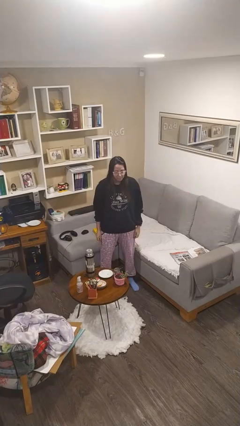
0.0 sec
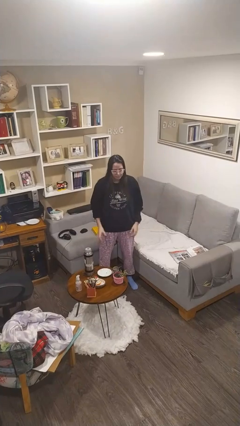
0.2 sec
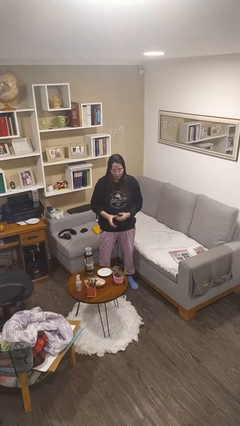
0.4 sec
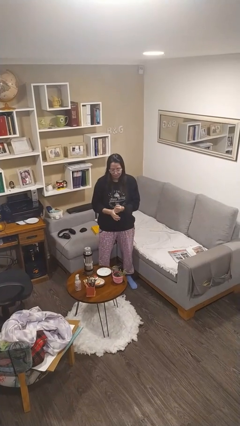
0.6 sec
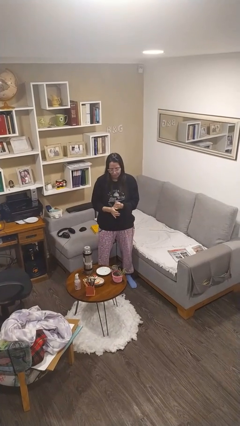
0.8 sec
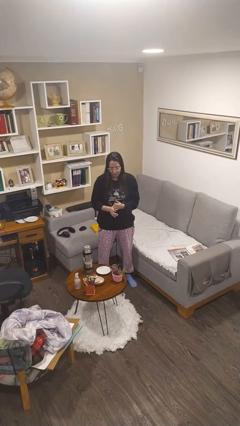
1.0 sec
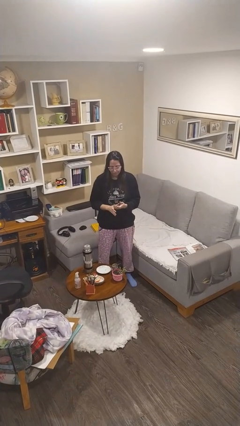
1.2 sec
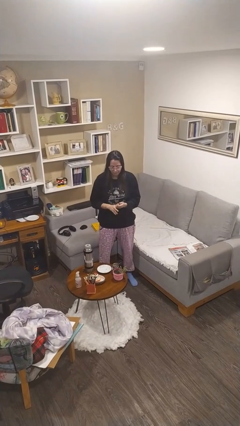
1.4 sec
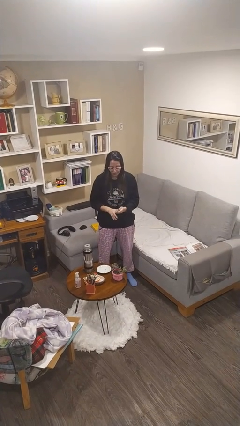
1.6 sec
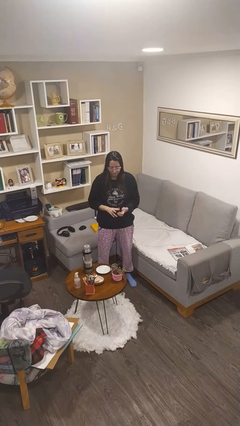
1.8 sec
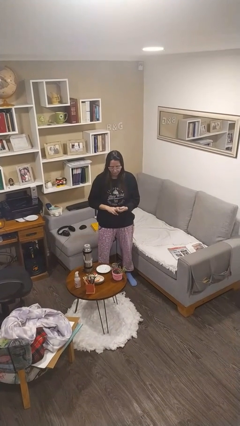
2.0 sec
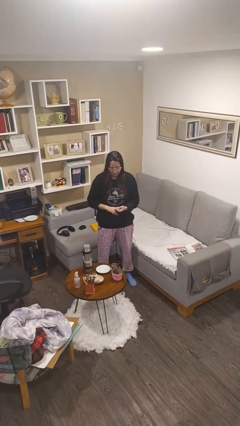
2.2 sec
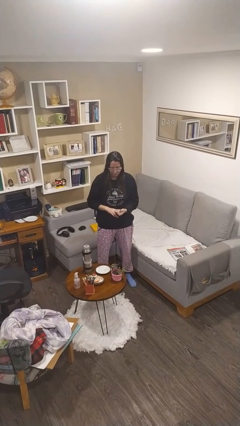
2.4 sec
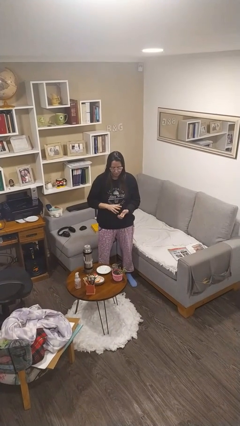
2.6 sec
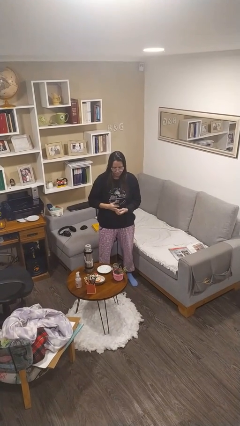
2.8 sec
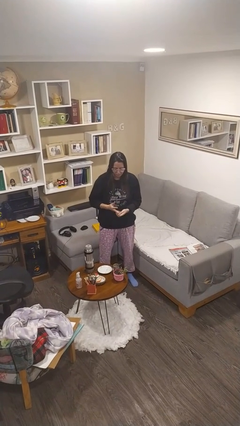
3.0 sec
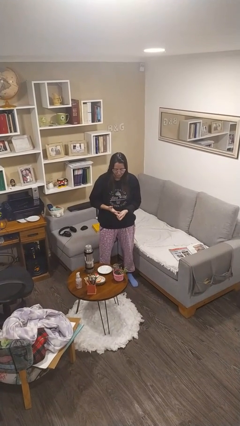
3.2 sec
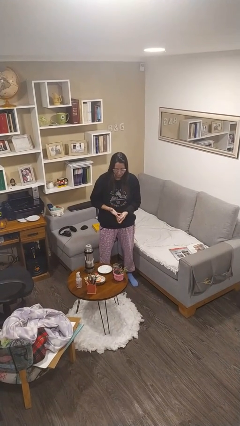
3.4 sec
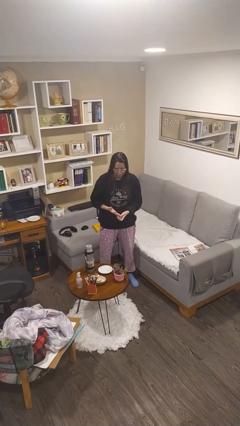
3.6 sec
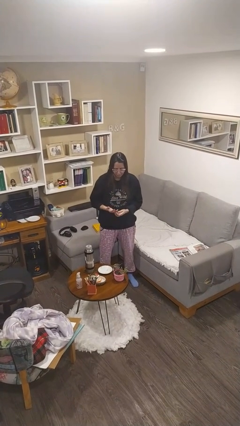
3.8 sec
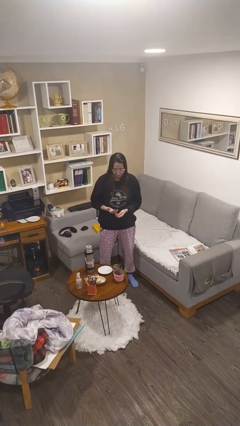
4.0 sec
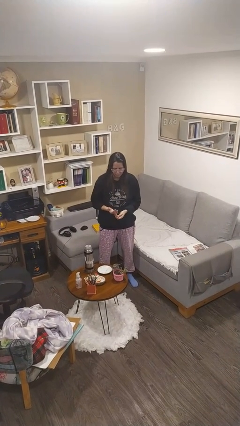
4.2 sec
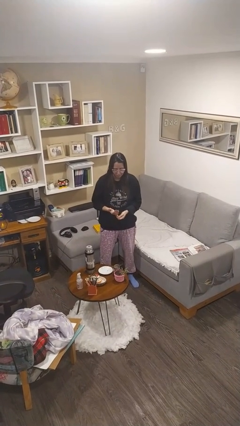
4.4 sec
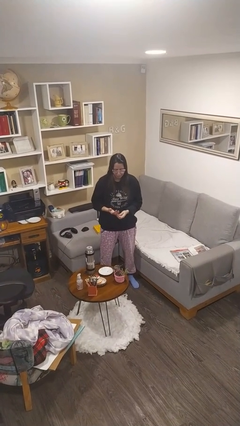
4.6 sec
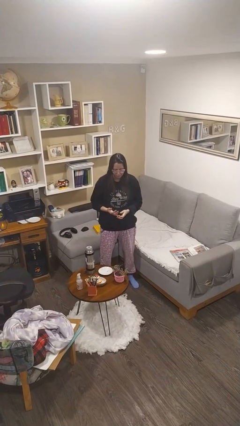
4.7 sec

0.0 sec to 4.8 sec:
person cracks knuckles

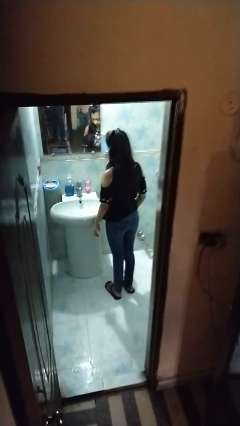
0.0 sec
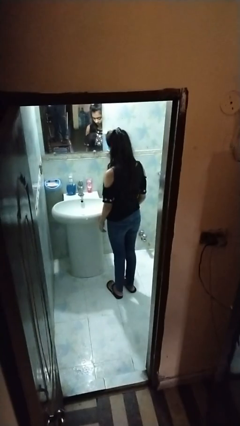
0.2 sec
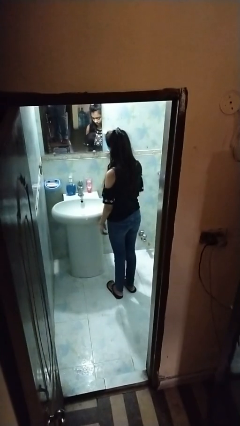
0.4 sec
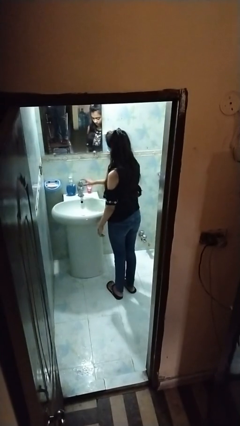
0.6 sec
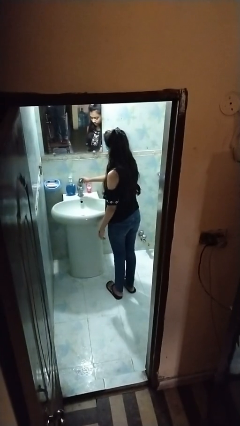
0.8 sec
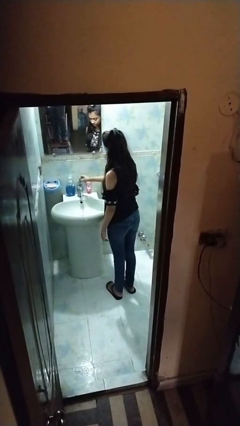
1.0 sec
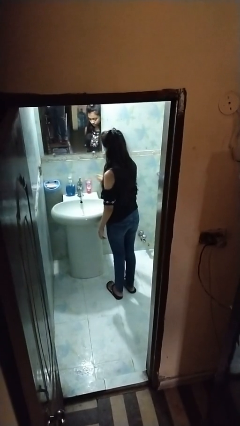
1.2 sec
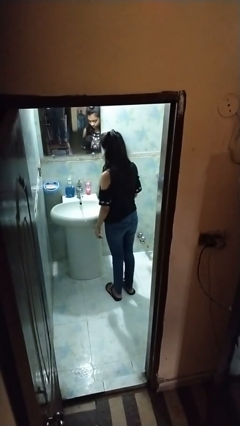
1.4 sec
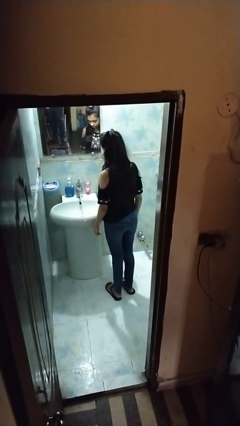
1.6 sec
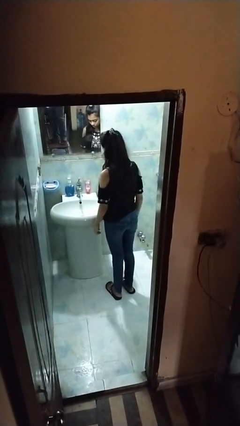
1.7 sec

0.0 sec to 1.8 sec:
person turns on faucet

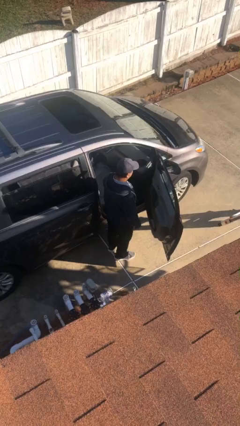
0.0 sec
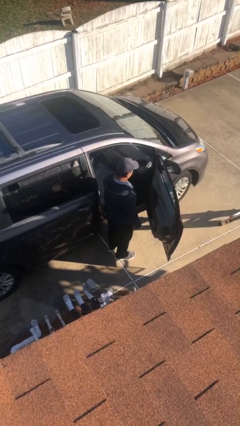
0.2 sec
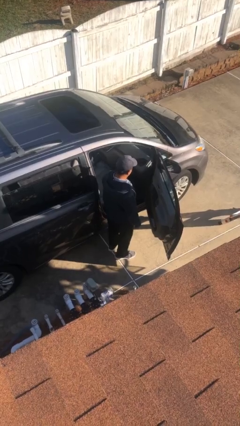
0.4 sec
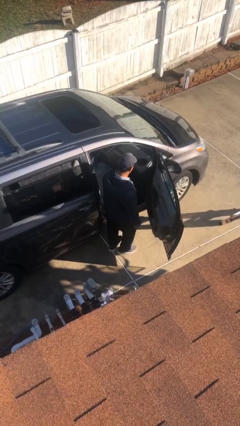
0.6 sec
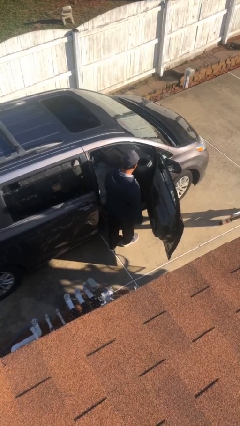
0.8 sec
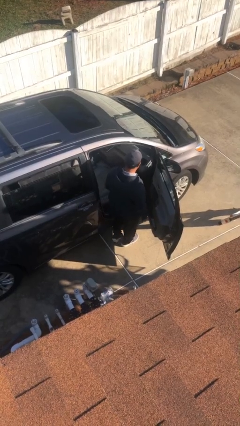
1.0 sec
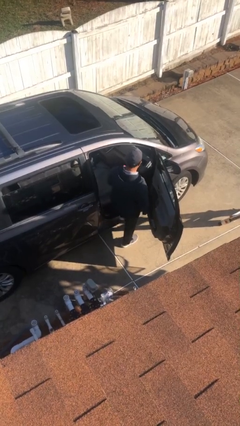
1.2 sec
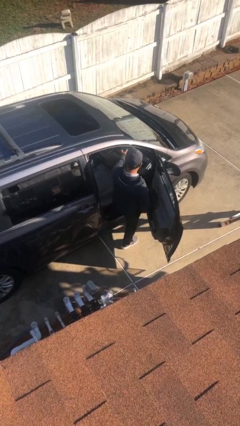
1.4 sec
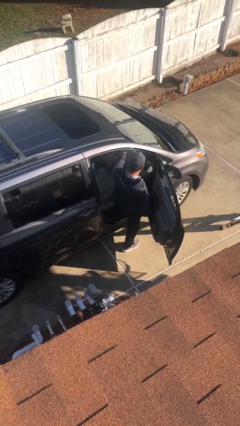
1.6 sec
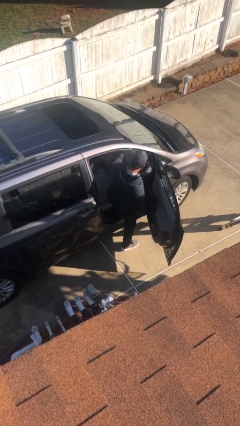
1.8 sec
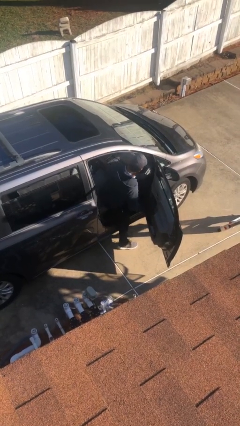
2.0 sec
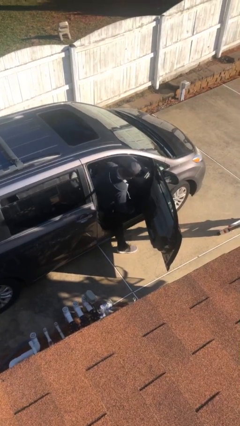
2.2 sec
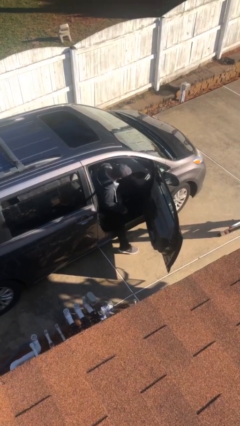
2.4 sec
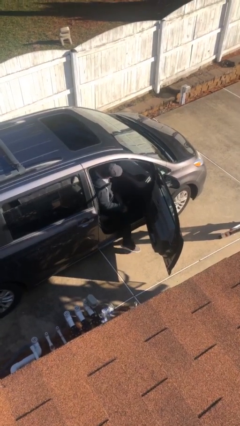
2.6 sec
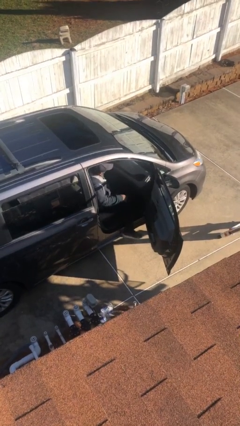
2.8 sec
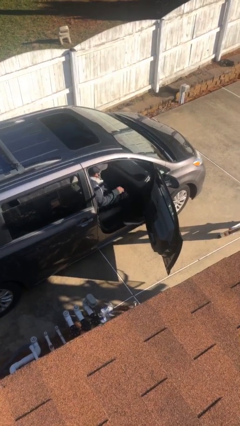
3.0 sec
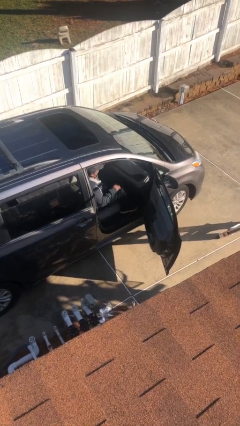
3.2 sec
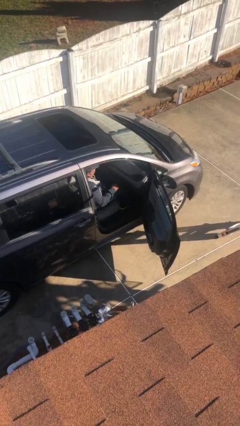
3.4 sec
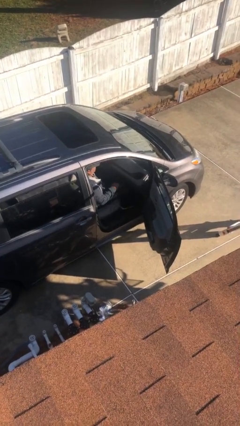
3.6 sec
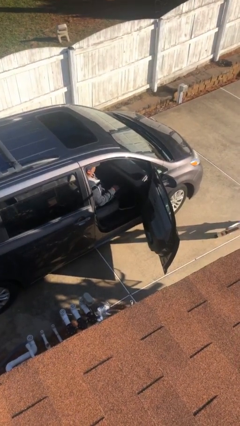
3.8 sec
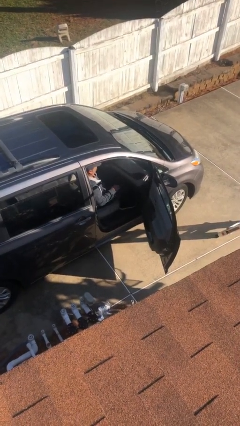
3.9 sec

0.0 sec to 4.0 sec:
person enters car

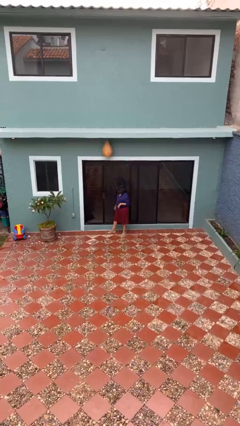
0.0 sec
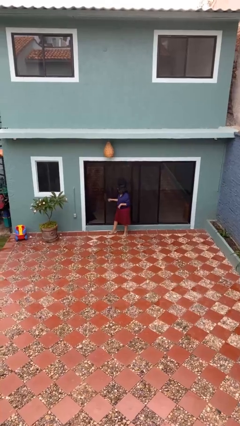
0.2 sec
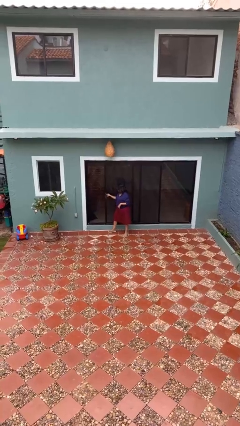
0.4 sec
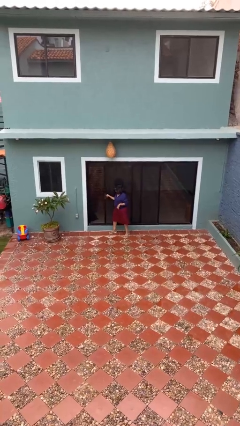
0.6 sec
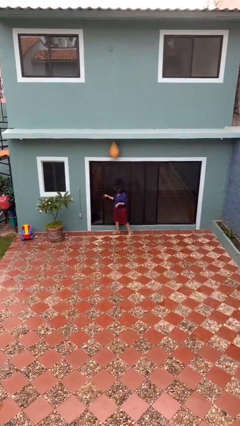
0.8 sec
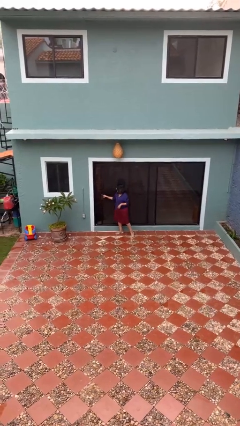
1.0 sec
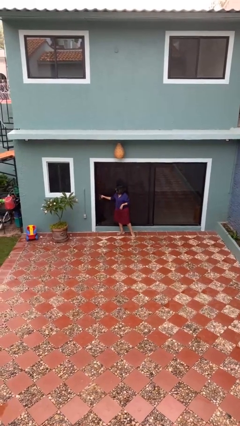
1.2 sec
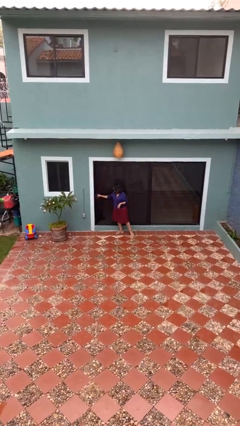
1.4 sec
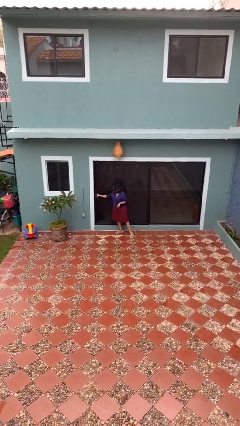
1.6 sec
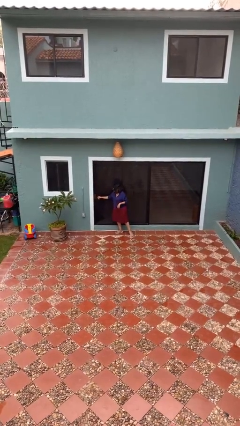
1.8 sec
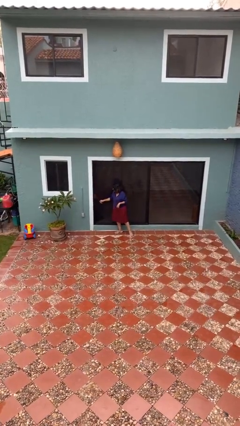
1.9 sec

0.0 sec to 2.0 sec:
person closes sliding door

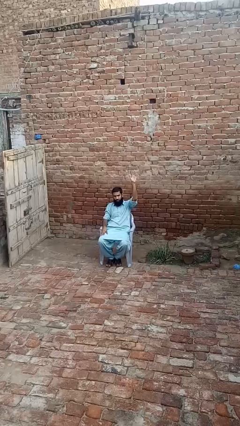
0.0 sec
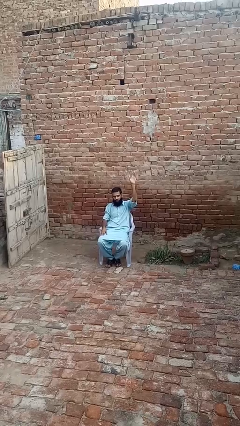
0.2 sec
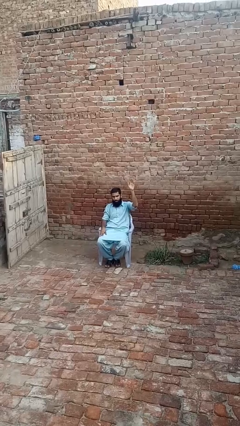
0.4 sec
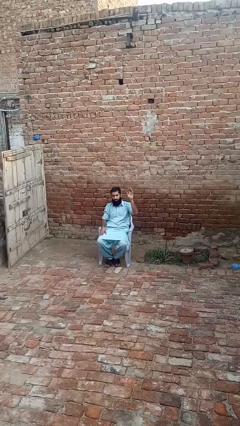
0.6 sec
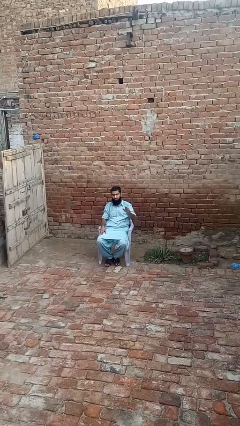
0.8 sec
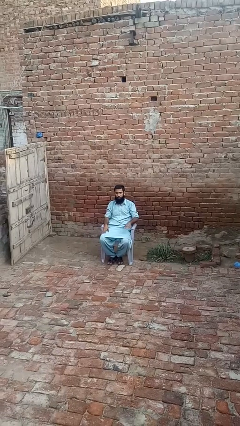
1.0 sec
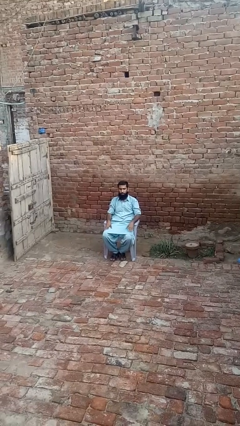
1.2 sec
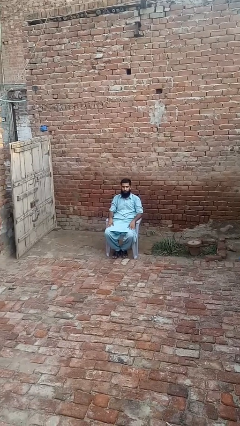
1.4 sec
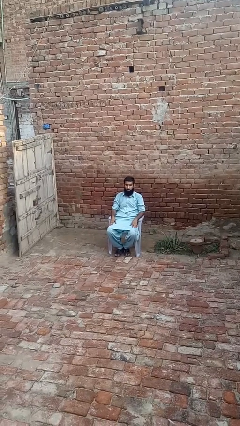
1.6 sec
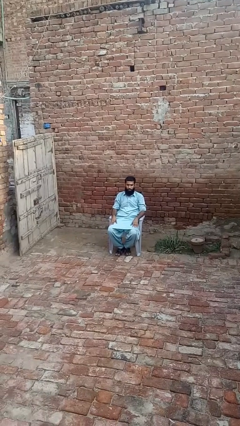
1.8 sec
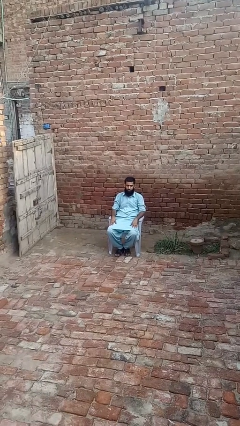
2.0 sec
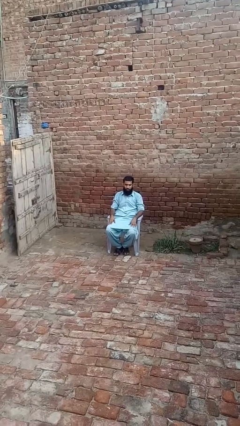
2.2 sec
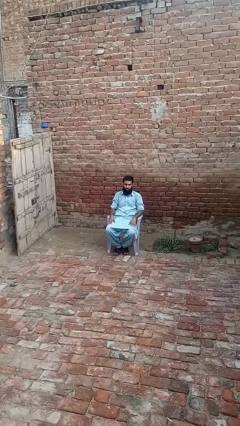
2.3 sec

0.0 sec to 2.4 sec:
person gestures lower hand

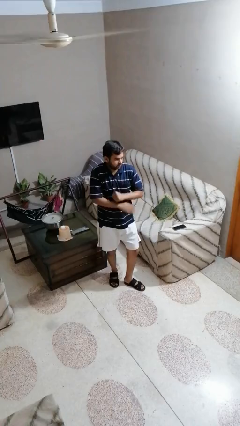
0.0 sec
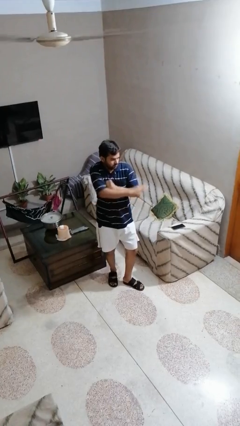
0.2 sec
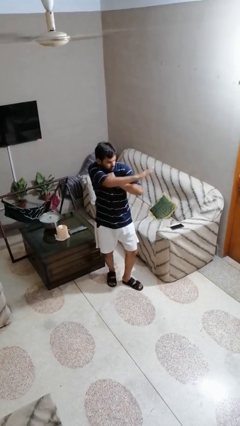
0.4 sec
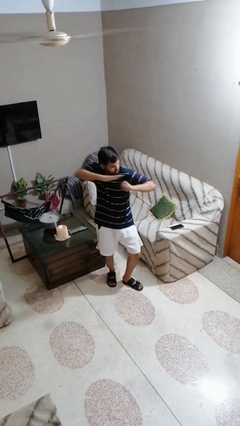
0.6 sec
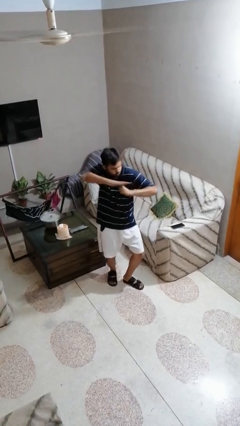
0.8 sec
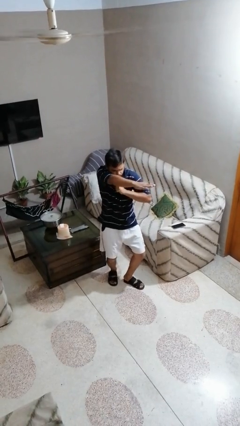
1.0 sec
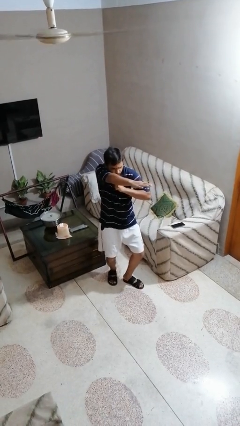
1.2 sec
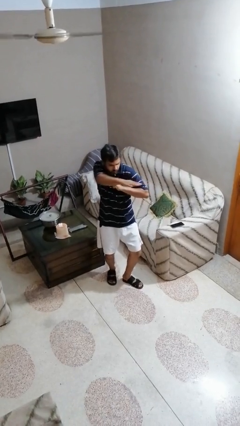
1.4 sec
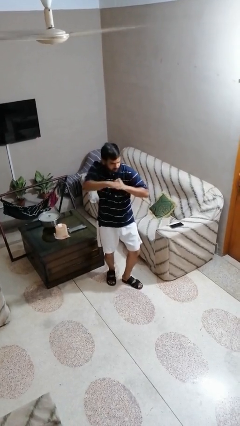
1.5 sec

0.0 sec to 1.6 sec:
person karate chop

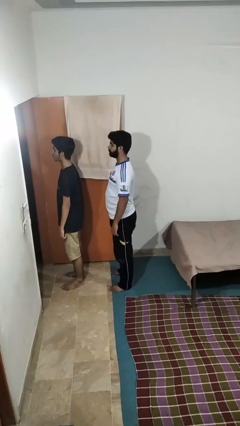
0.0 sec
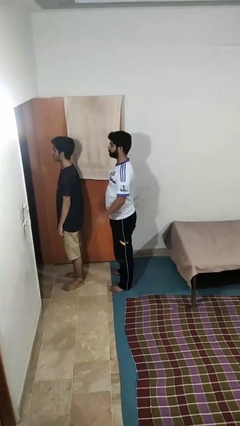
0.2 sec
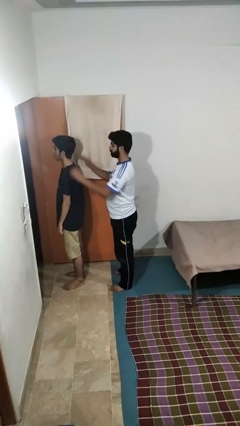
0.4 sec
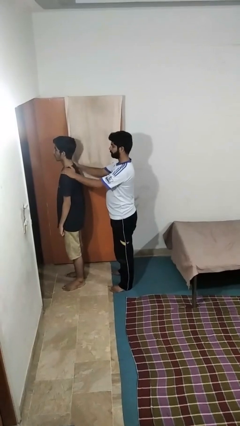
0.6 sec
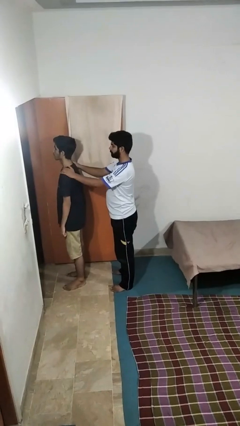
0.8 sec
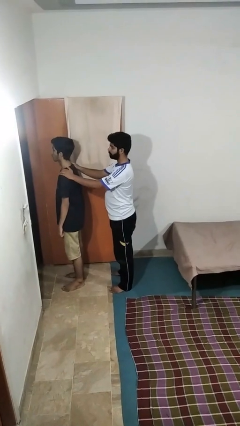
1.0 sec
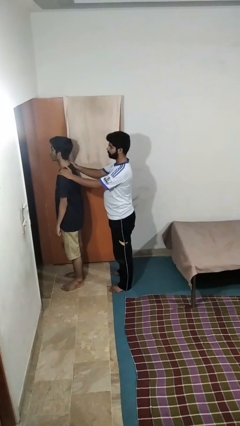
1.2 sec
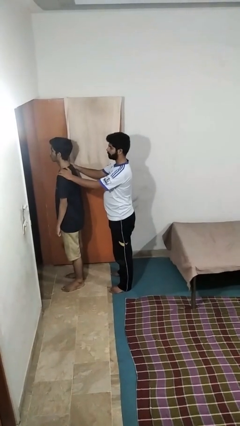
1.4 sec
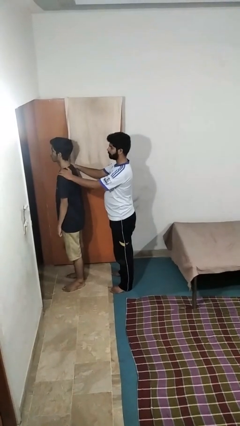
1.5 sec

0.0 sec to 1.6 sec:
person grabs person by shoulder
